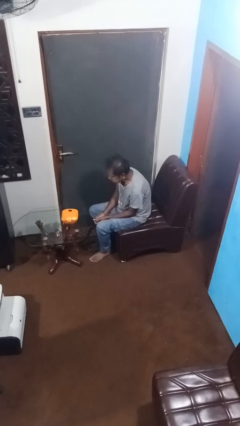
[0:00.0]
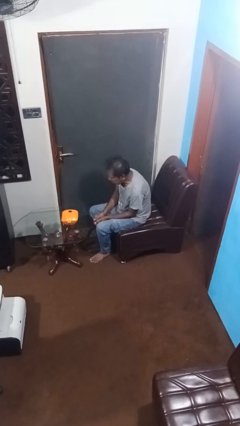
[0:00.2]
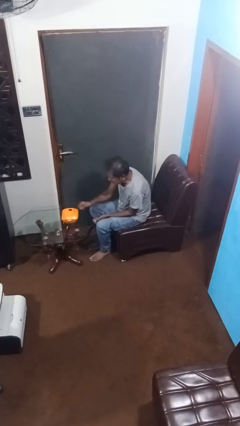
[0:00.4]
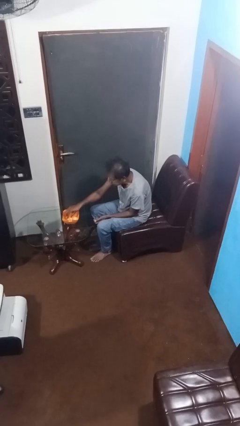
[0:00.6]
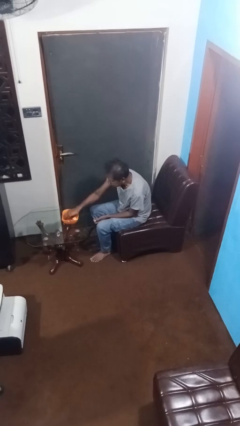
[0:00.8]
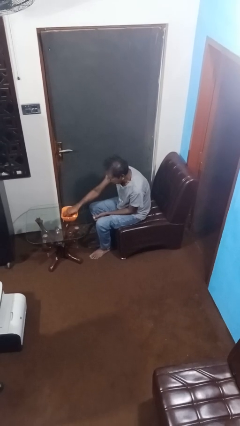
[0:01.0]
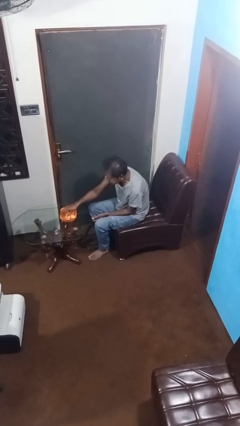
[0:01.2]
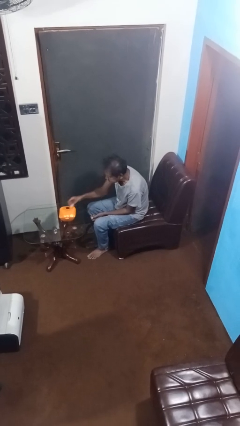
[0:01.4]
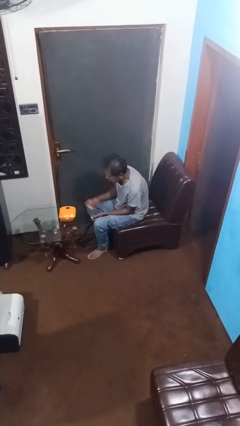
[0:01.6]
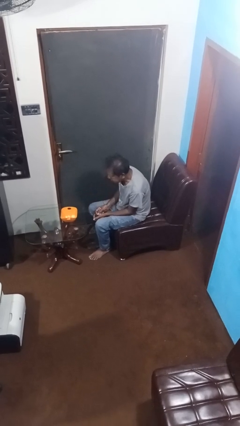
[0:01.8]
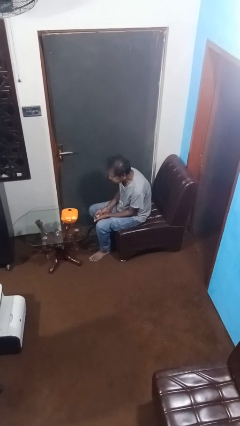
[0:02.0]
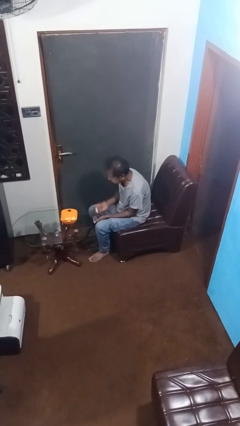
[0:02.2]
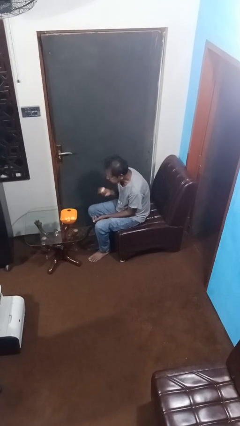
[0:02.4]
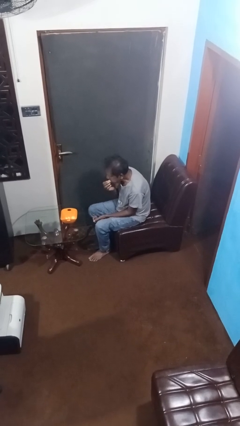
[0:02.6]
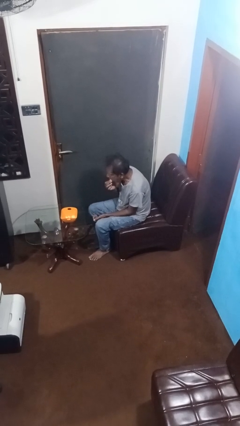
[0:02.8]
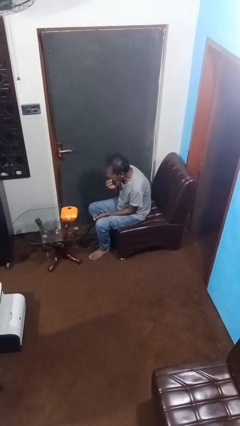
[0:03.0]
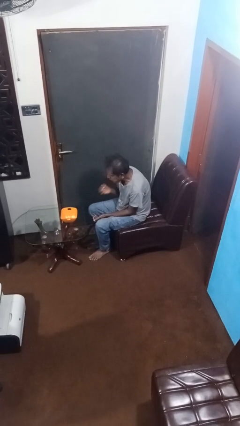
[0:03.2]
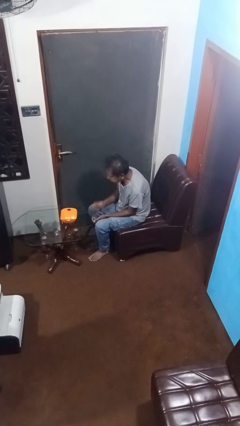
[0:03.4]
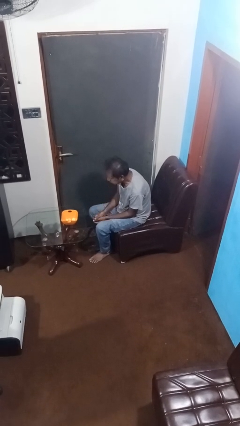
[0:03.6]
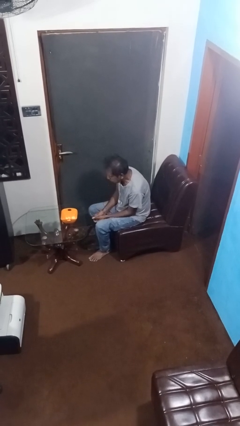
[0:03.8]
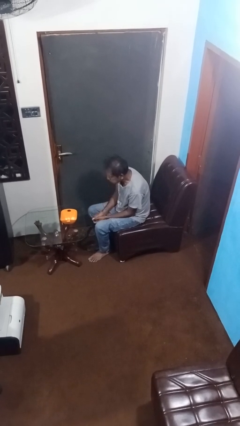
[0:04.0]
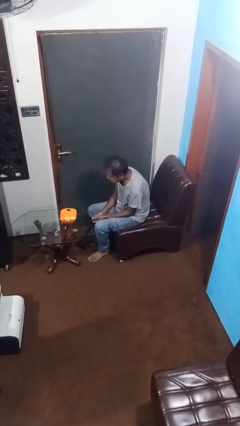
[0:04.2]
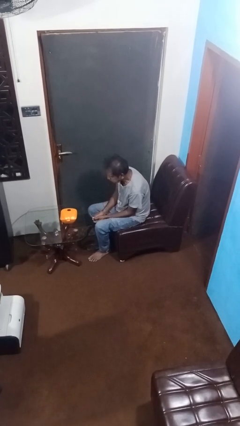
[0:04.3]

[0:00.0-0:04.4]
person eats with hands

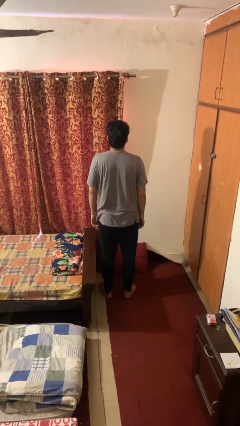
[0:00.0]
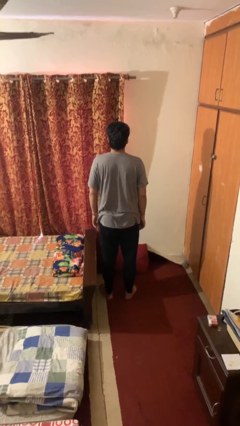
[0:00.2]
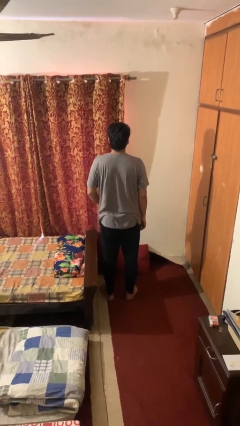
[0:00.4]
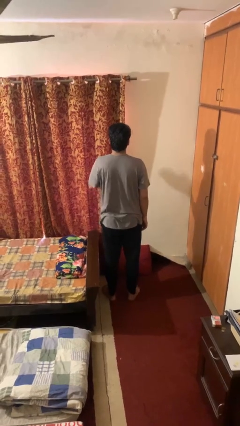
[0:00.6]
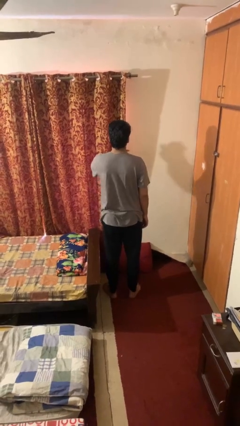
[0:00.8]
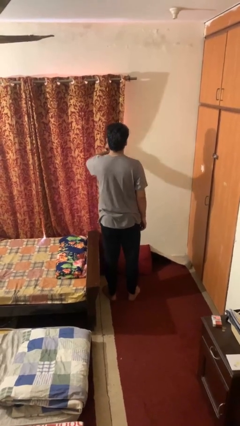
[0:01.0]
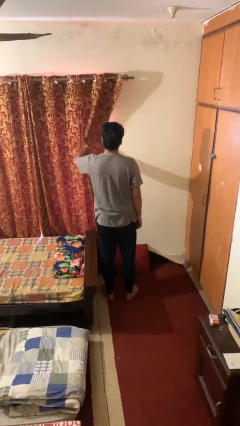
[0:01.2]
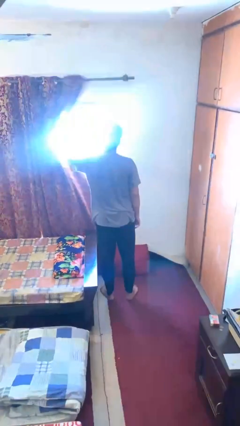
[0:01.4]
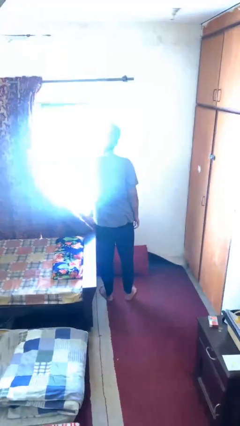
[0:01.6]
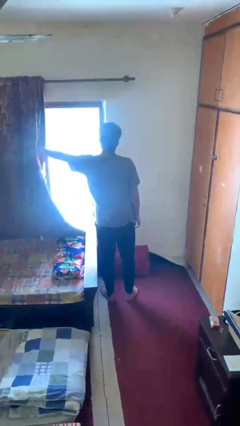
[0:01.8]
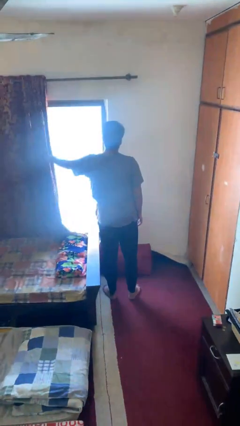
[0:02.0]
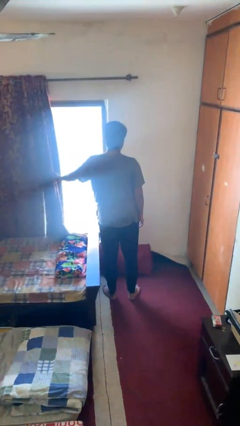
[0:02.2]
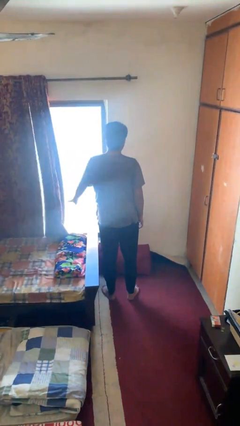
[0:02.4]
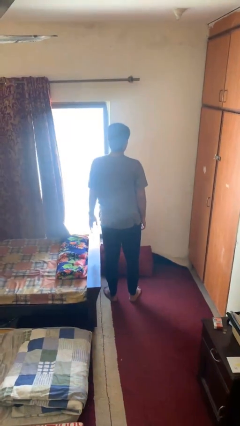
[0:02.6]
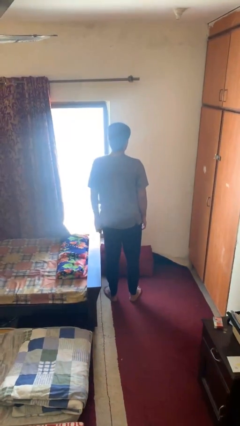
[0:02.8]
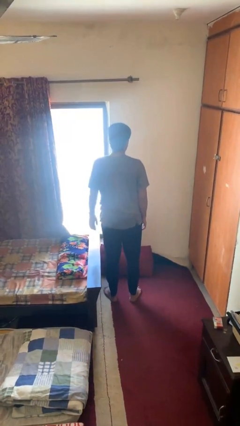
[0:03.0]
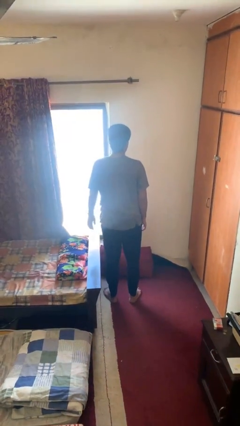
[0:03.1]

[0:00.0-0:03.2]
person opens curtains

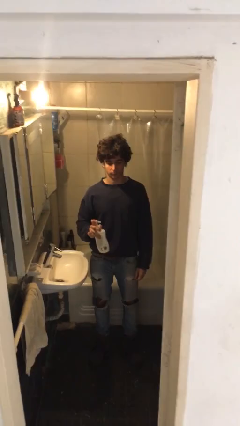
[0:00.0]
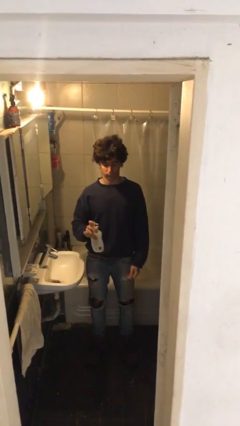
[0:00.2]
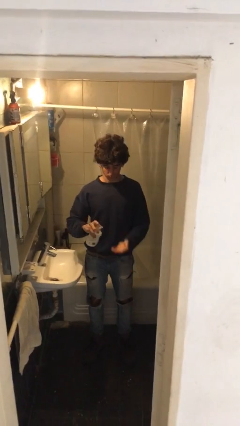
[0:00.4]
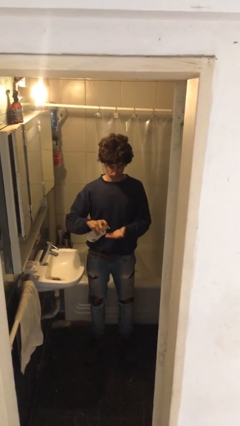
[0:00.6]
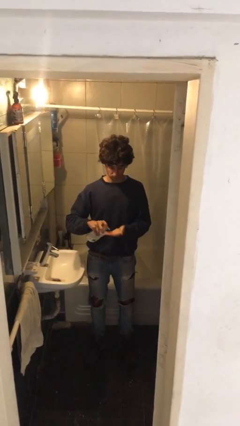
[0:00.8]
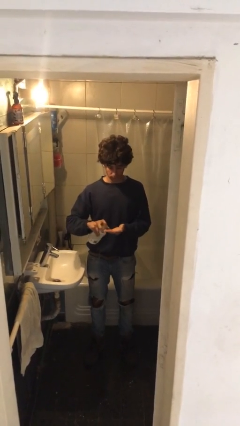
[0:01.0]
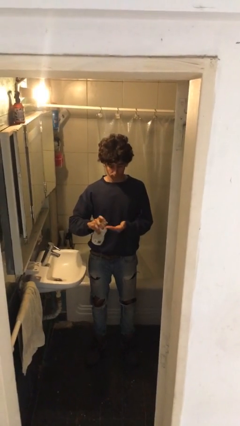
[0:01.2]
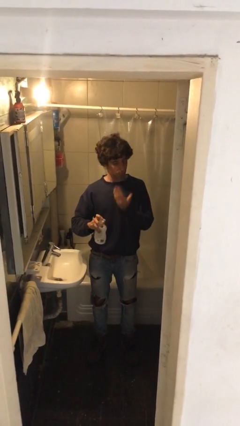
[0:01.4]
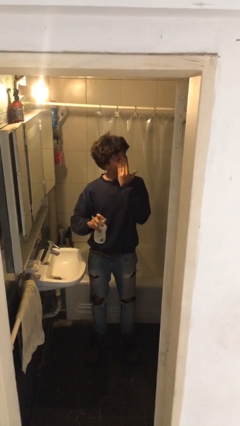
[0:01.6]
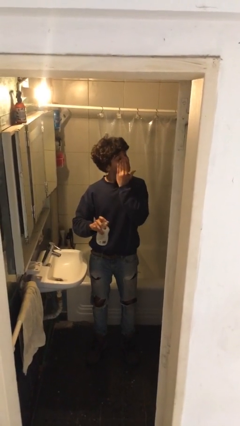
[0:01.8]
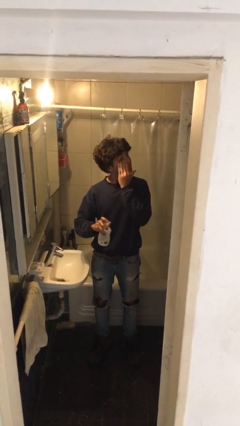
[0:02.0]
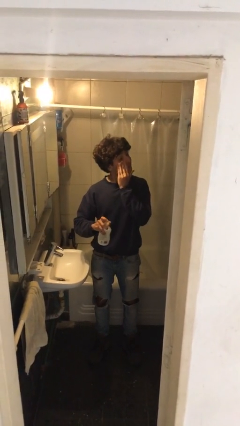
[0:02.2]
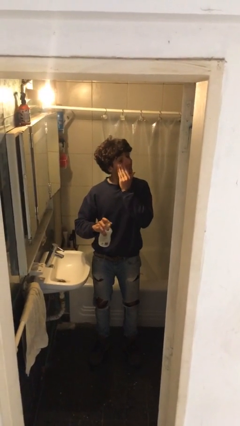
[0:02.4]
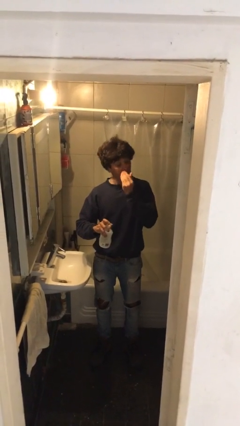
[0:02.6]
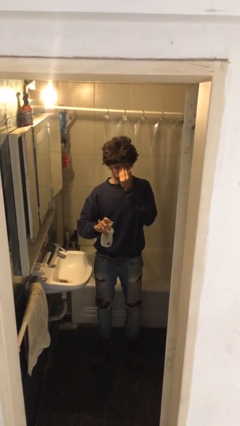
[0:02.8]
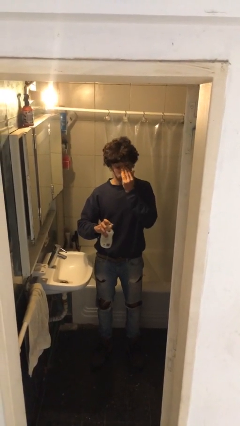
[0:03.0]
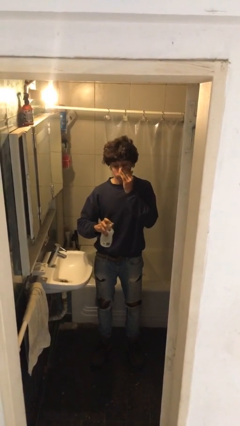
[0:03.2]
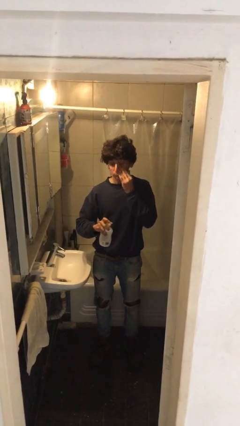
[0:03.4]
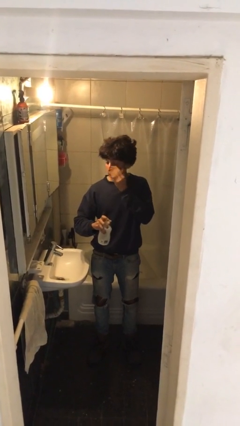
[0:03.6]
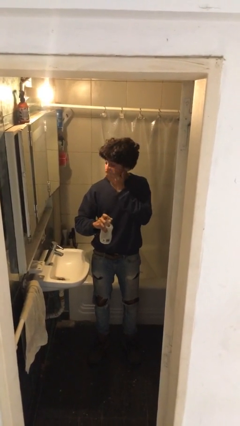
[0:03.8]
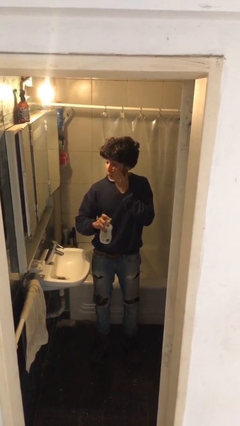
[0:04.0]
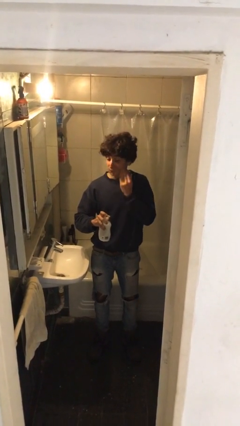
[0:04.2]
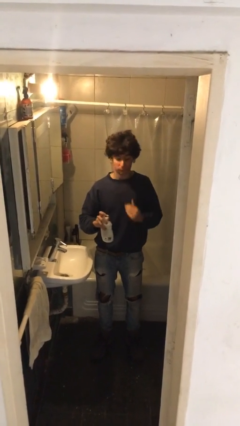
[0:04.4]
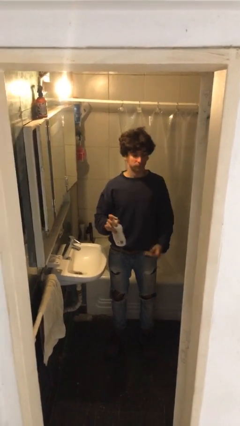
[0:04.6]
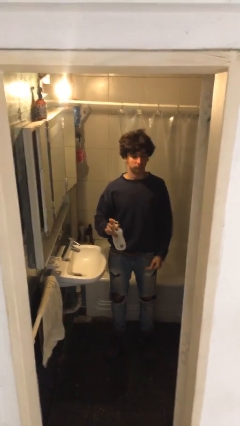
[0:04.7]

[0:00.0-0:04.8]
person applies facial moisturizer

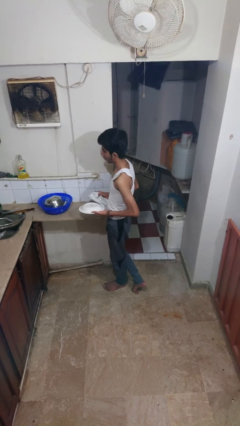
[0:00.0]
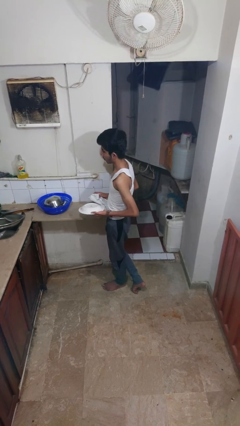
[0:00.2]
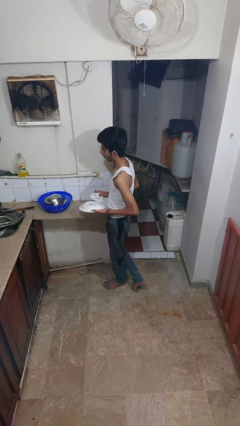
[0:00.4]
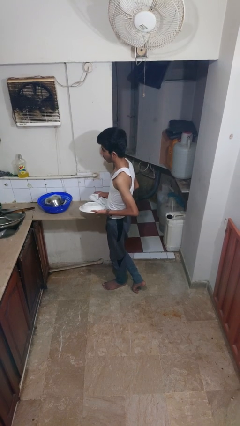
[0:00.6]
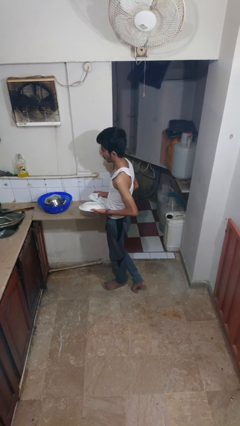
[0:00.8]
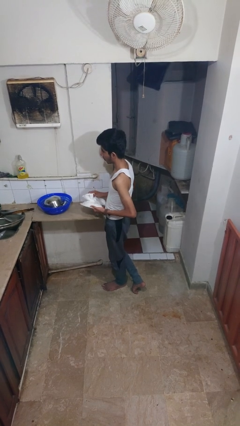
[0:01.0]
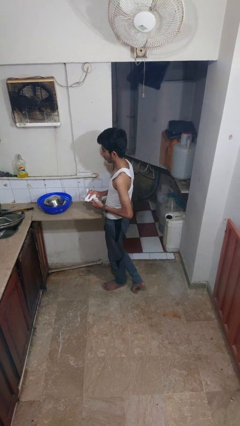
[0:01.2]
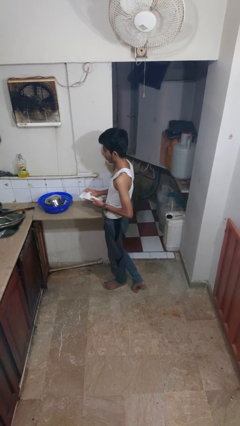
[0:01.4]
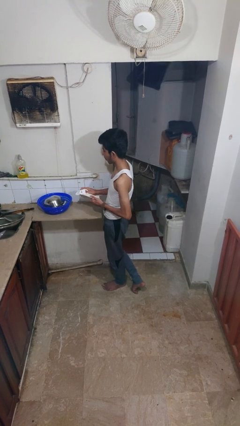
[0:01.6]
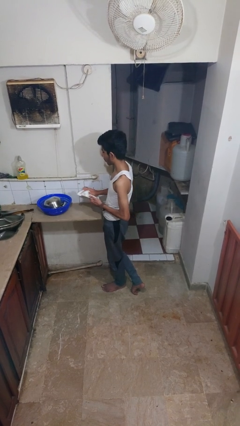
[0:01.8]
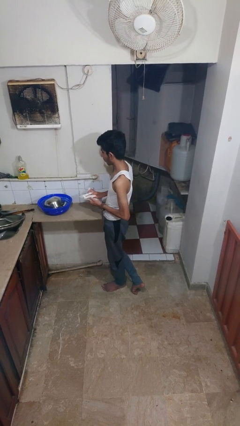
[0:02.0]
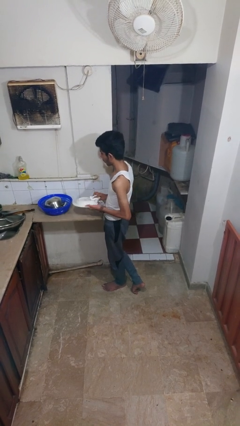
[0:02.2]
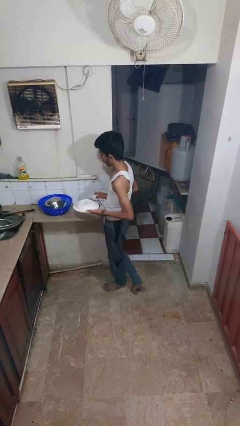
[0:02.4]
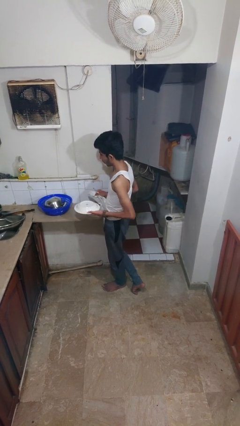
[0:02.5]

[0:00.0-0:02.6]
person dries dish

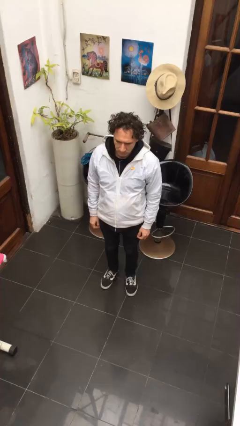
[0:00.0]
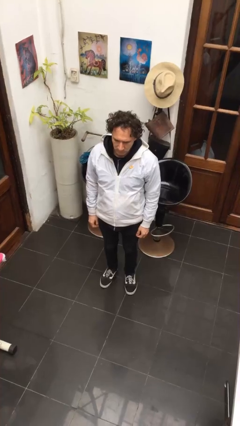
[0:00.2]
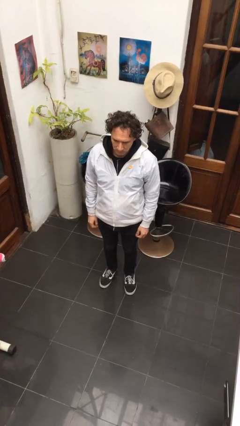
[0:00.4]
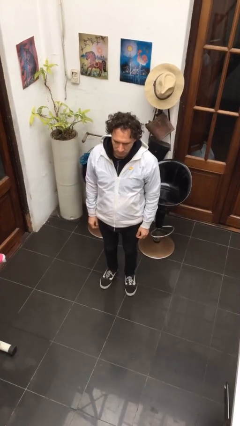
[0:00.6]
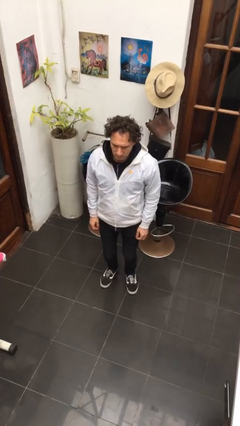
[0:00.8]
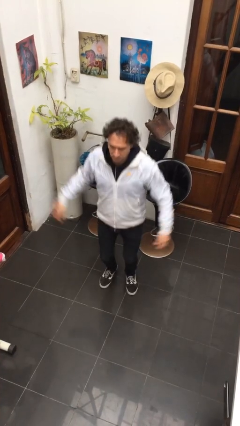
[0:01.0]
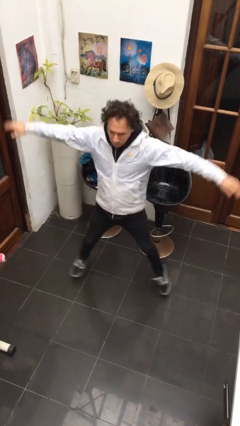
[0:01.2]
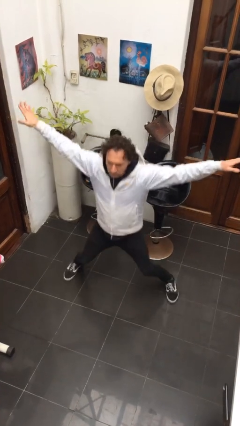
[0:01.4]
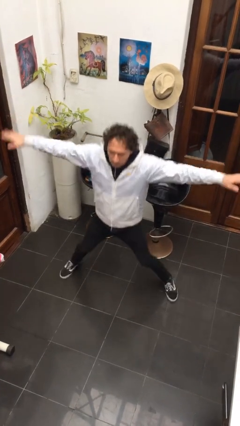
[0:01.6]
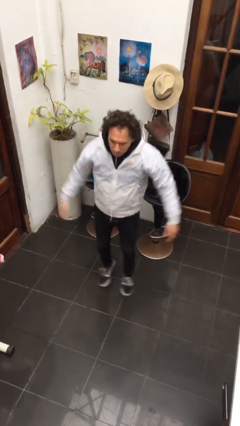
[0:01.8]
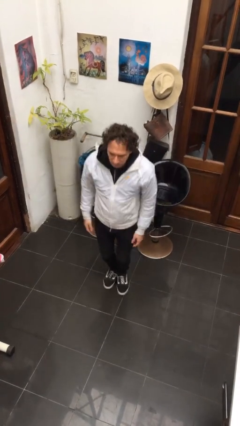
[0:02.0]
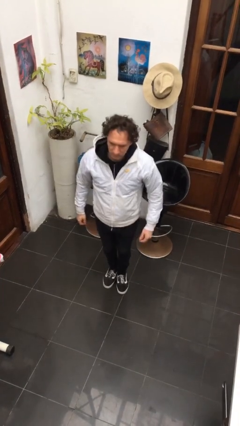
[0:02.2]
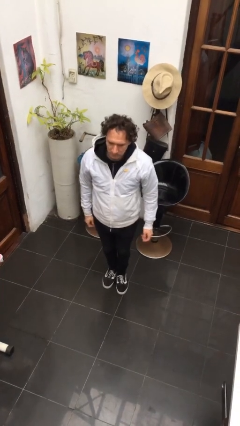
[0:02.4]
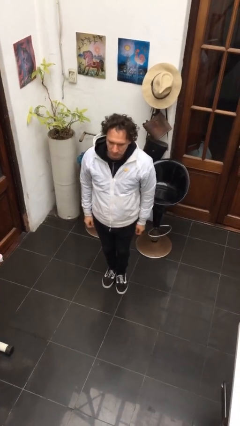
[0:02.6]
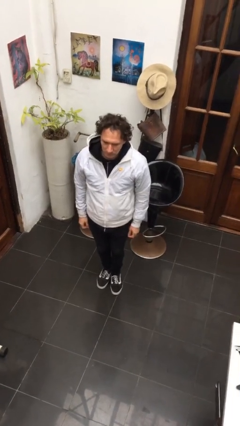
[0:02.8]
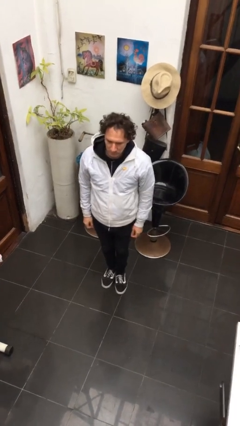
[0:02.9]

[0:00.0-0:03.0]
person exercises with jumping jacks
